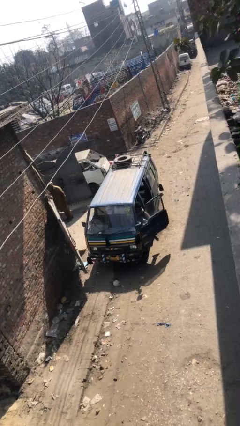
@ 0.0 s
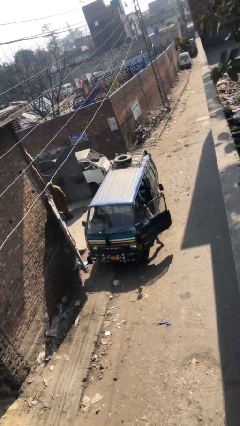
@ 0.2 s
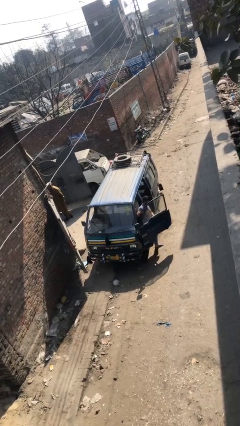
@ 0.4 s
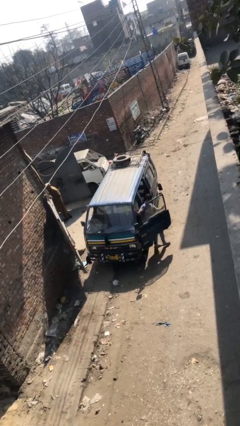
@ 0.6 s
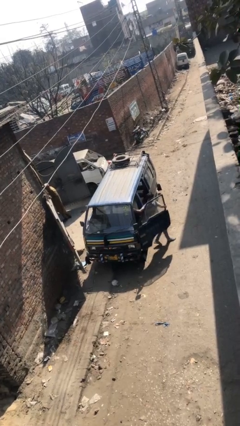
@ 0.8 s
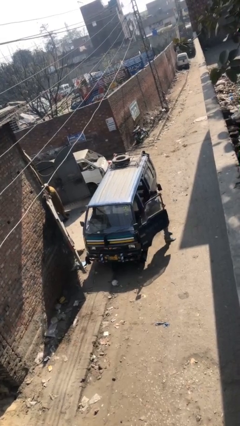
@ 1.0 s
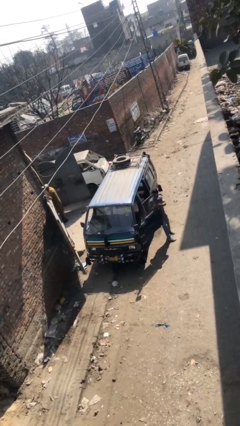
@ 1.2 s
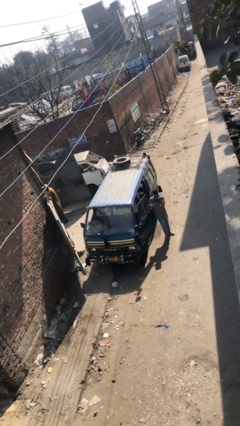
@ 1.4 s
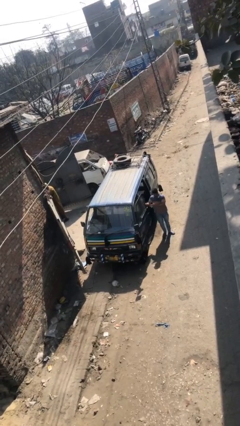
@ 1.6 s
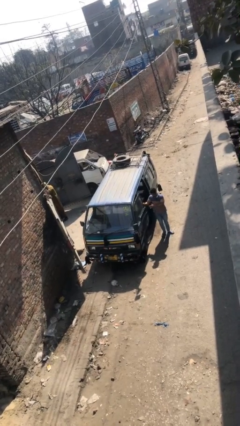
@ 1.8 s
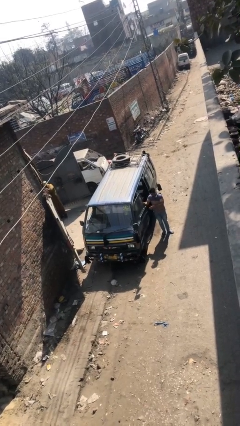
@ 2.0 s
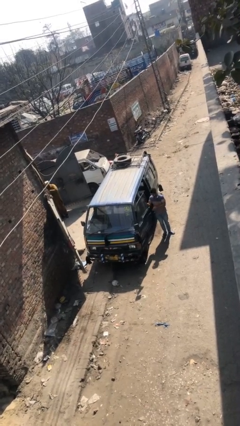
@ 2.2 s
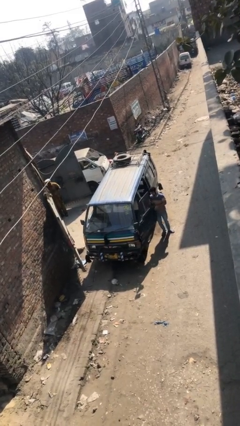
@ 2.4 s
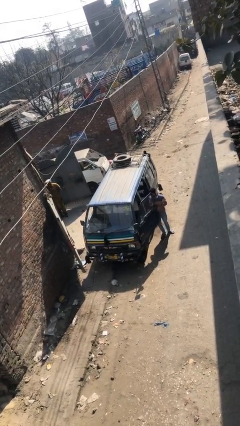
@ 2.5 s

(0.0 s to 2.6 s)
car drops off person

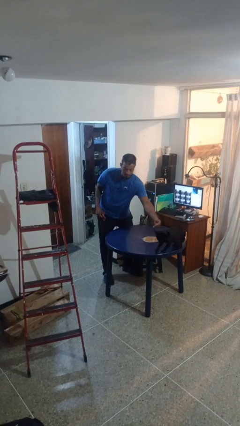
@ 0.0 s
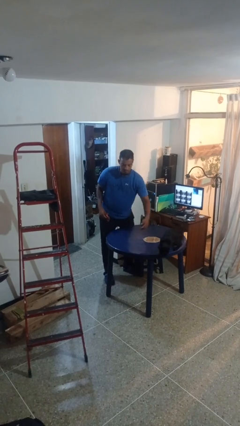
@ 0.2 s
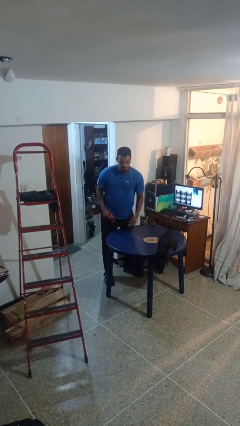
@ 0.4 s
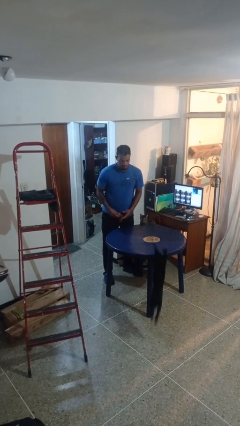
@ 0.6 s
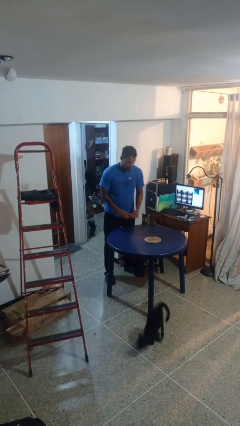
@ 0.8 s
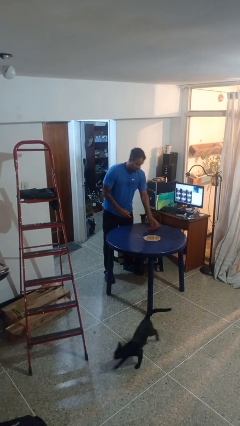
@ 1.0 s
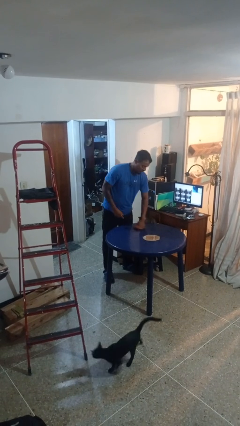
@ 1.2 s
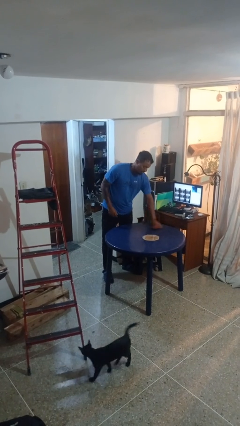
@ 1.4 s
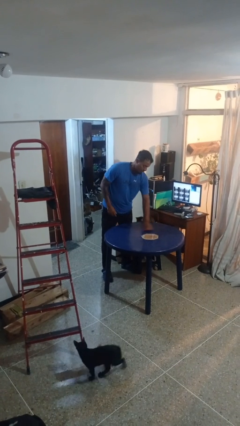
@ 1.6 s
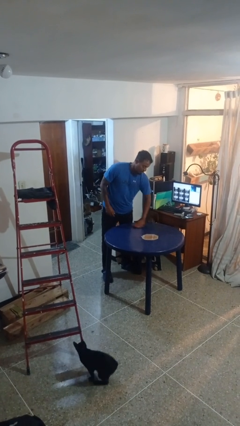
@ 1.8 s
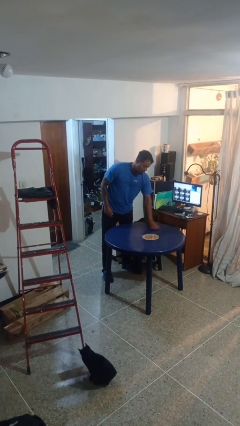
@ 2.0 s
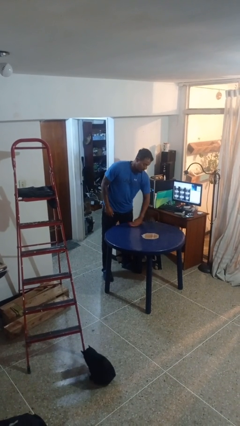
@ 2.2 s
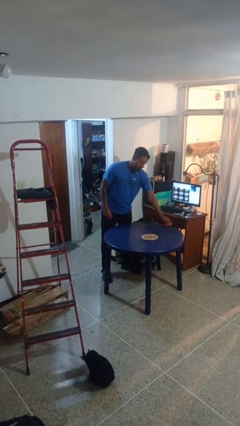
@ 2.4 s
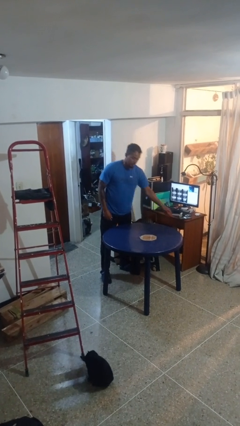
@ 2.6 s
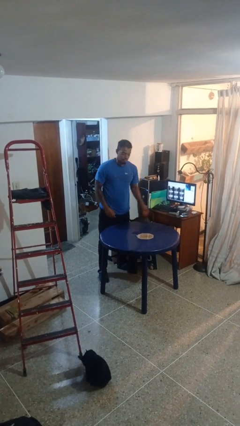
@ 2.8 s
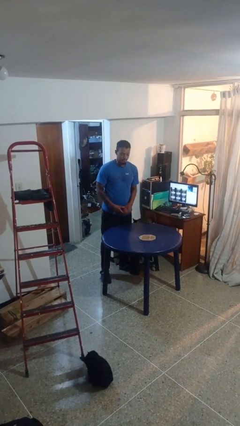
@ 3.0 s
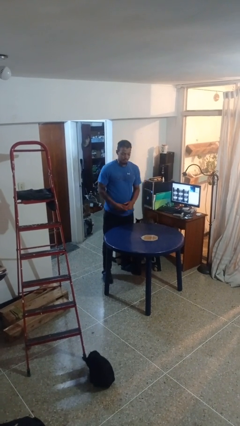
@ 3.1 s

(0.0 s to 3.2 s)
person cleans table with rag

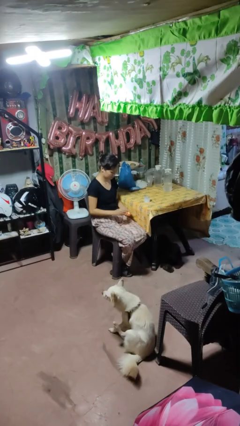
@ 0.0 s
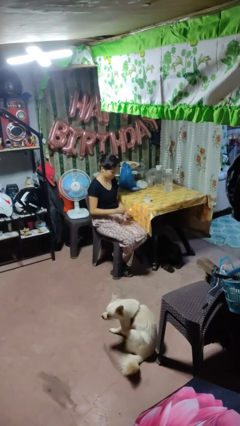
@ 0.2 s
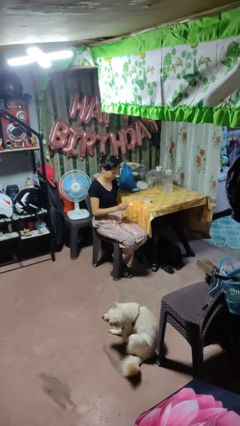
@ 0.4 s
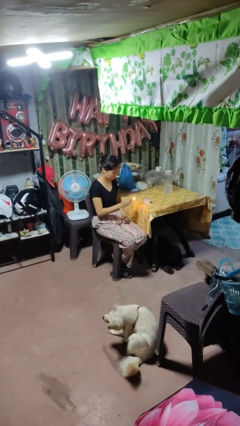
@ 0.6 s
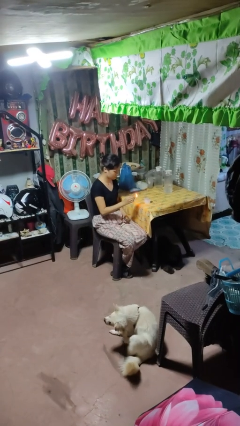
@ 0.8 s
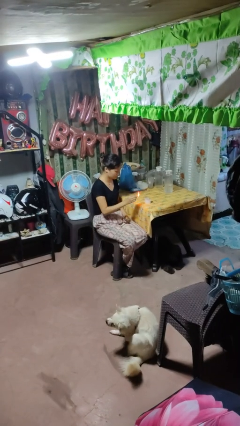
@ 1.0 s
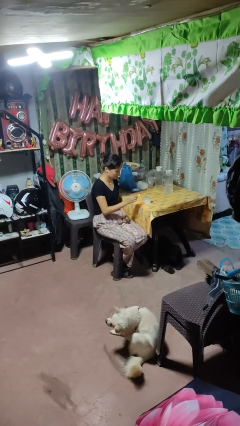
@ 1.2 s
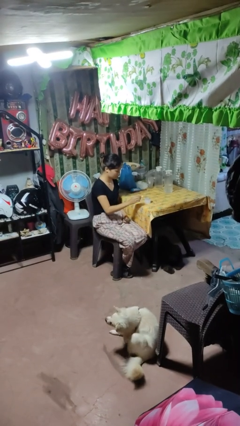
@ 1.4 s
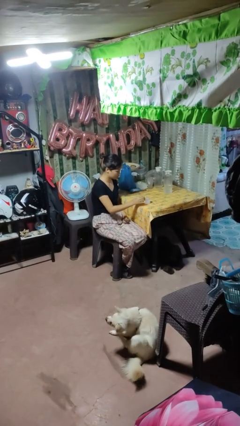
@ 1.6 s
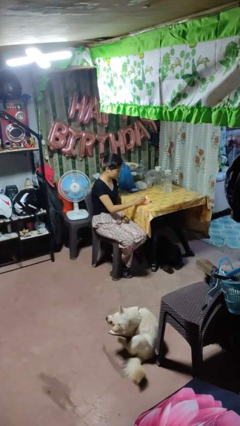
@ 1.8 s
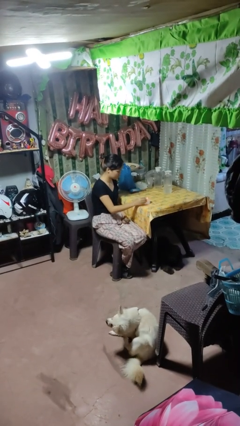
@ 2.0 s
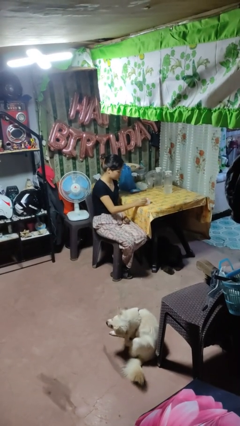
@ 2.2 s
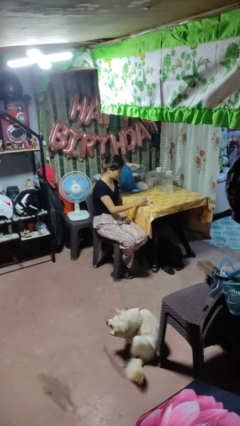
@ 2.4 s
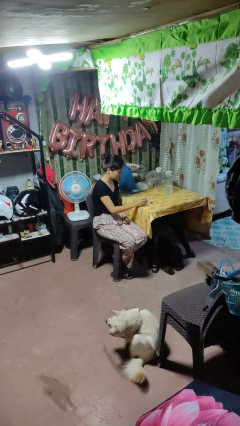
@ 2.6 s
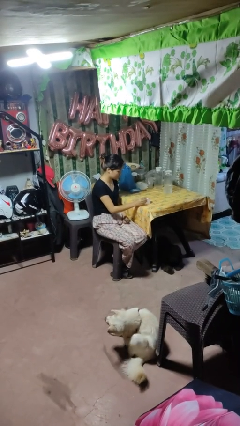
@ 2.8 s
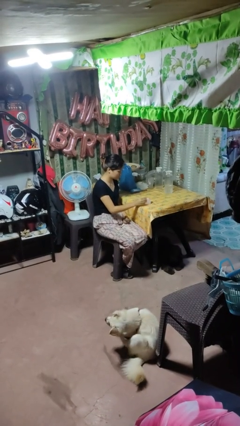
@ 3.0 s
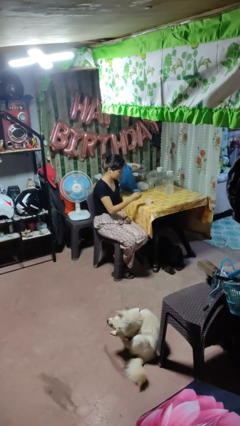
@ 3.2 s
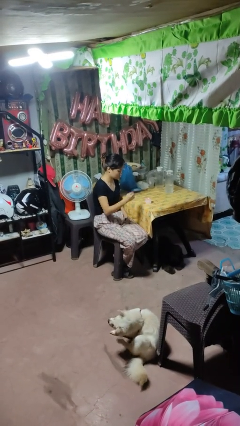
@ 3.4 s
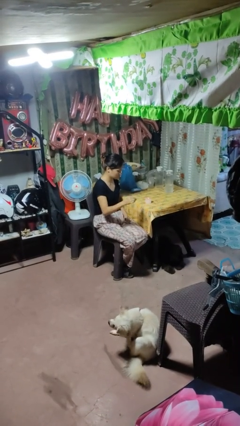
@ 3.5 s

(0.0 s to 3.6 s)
person lights candle

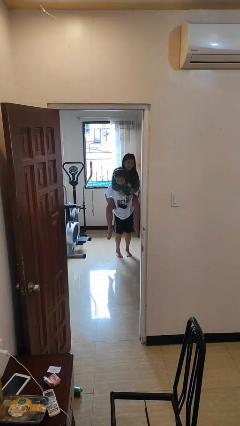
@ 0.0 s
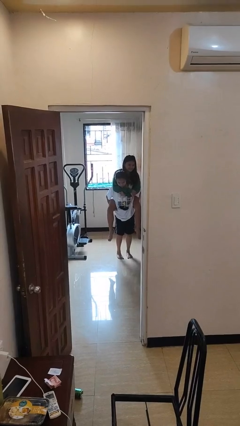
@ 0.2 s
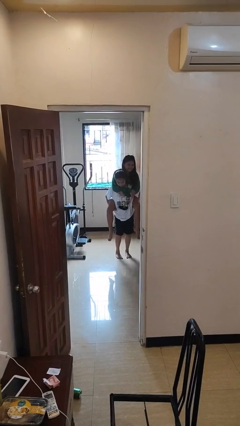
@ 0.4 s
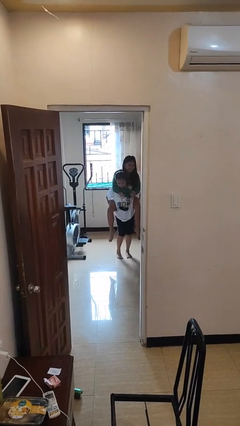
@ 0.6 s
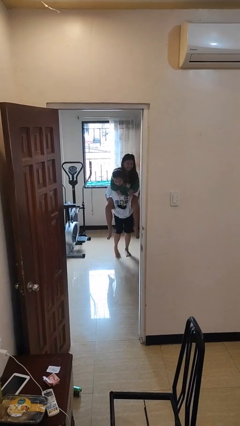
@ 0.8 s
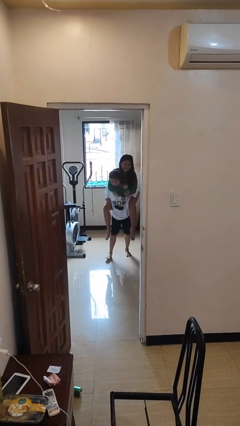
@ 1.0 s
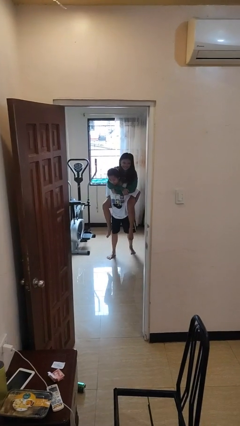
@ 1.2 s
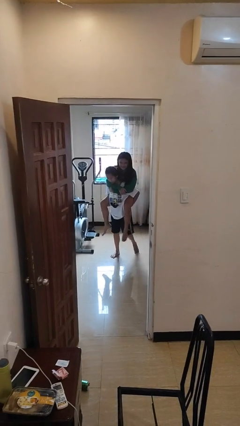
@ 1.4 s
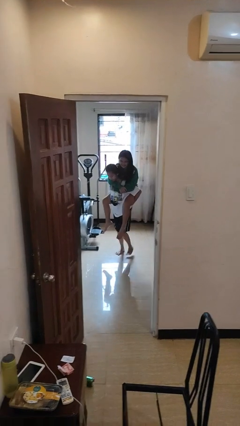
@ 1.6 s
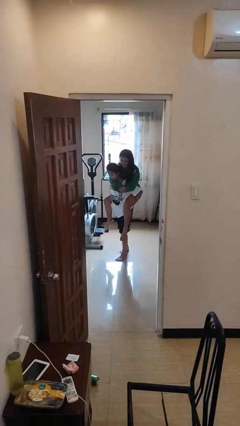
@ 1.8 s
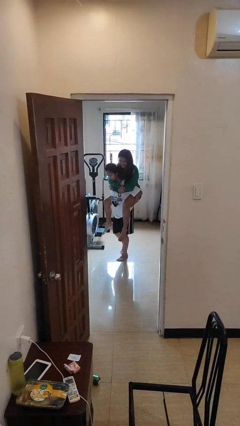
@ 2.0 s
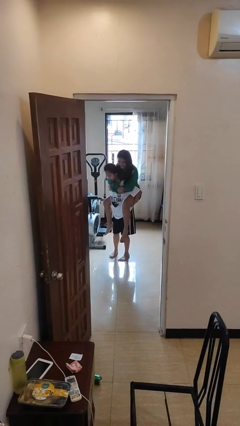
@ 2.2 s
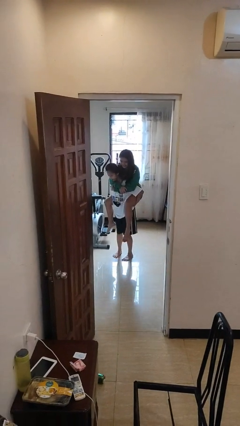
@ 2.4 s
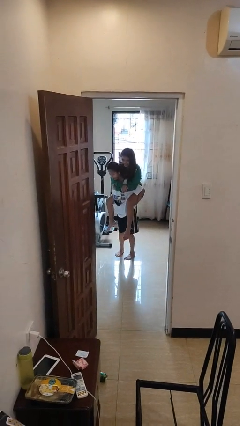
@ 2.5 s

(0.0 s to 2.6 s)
person carries person on back

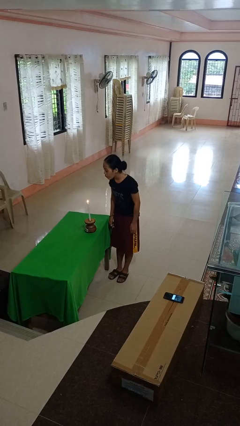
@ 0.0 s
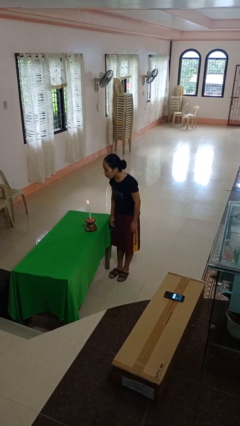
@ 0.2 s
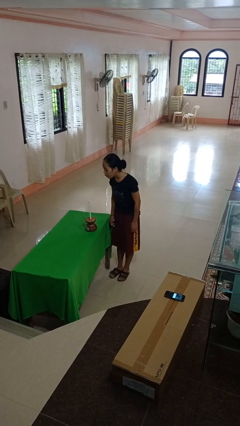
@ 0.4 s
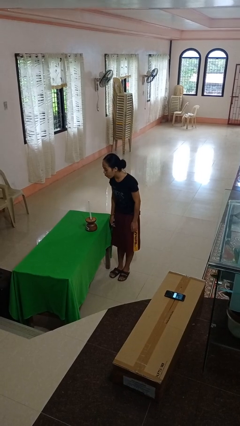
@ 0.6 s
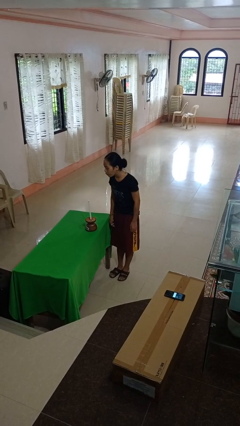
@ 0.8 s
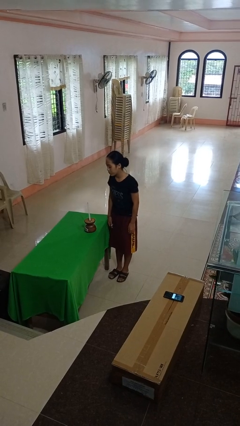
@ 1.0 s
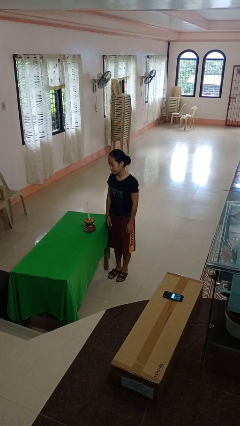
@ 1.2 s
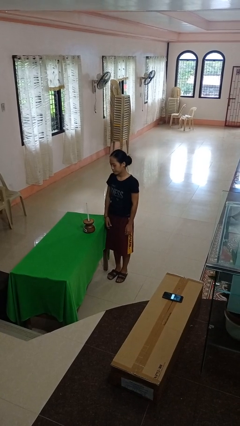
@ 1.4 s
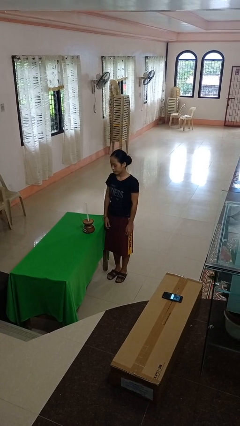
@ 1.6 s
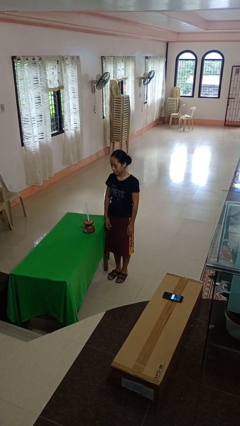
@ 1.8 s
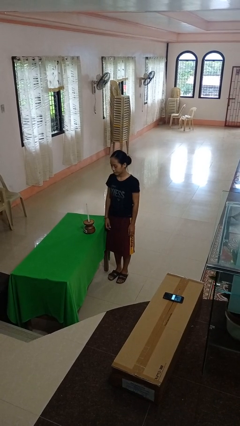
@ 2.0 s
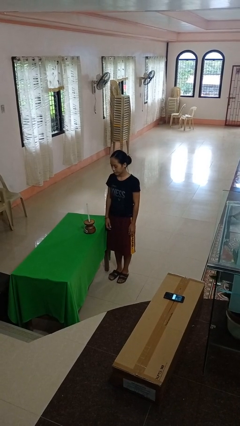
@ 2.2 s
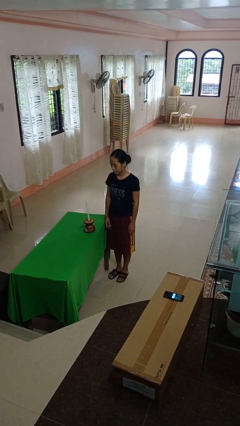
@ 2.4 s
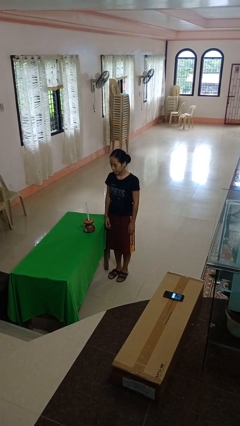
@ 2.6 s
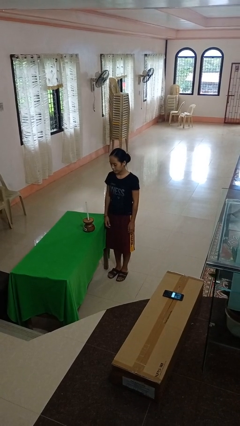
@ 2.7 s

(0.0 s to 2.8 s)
person extinguishes candle

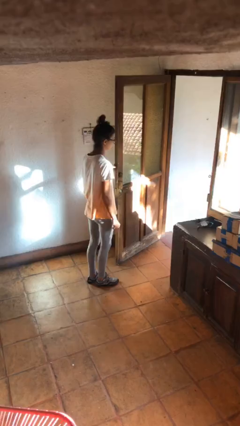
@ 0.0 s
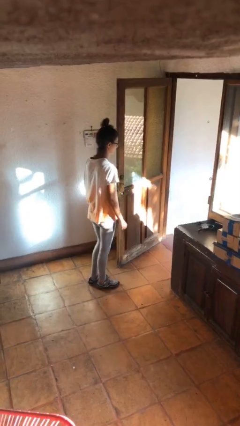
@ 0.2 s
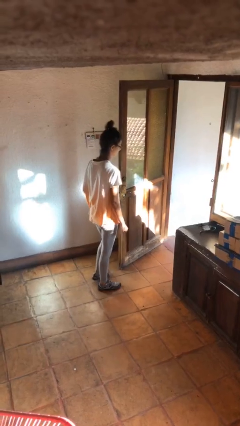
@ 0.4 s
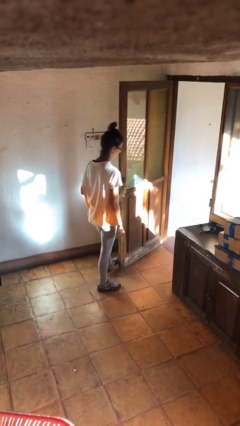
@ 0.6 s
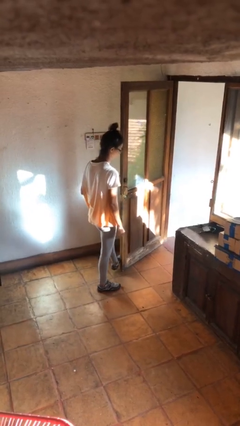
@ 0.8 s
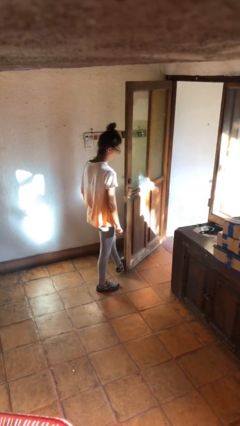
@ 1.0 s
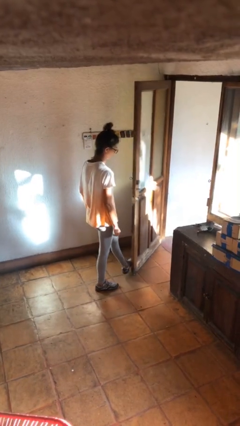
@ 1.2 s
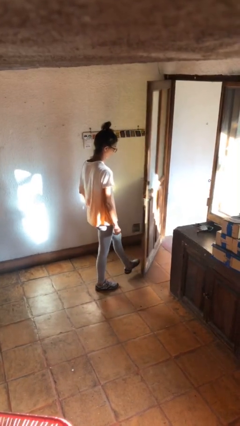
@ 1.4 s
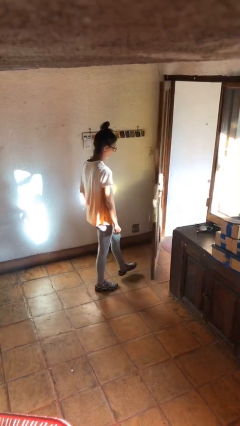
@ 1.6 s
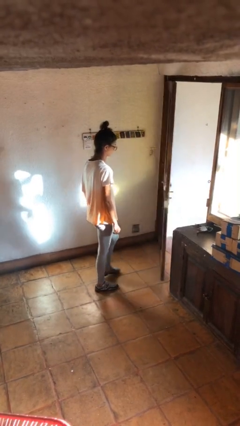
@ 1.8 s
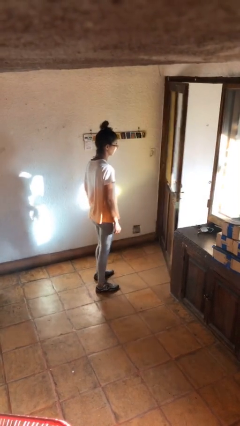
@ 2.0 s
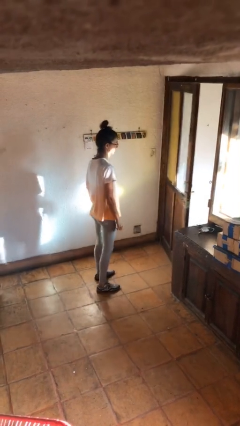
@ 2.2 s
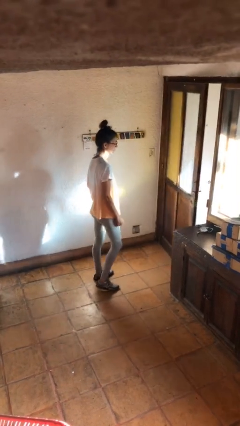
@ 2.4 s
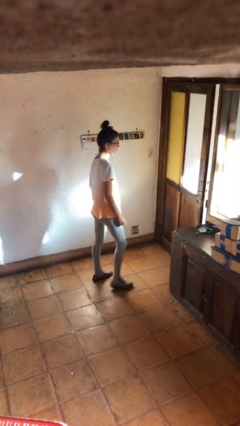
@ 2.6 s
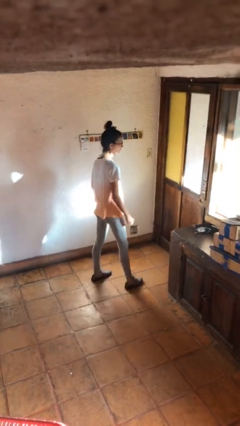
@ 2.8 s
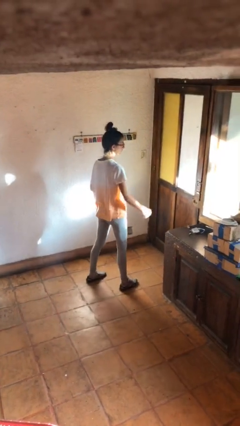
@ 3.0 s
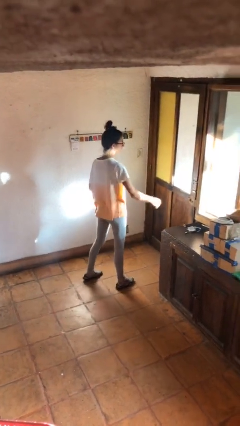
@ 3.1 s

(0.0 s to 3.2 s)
person closes door with foot
